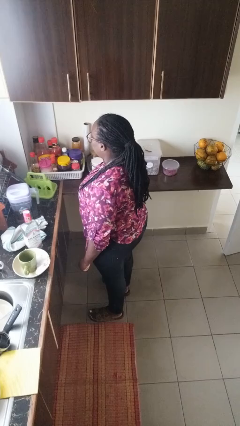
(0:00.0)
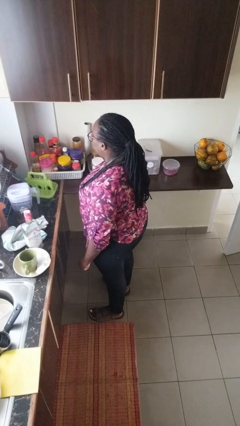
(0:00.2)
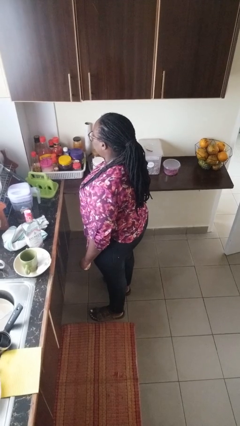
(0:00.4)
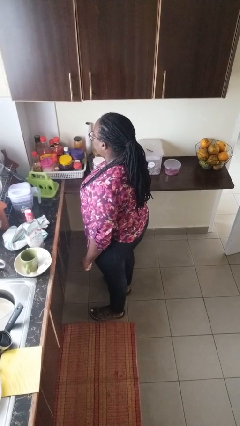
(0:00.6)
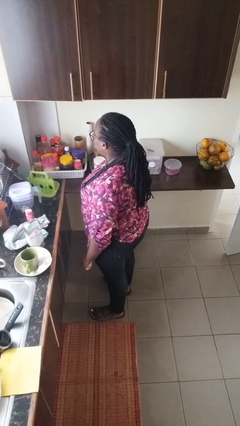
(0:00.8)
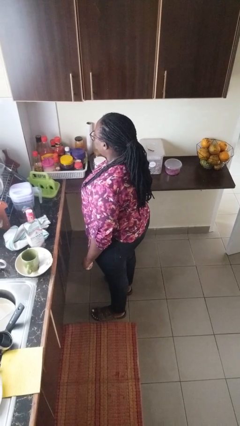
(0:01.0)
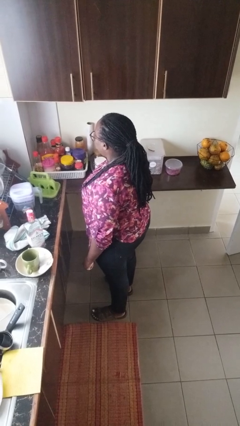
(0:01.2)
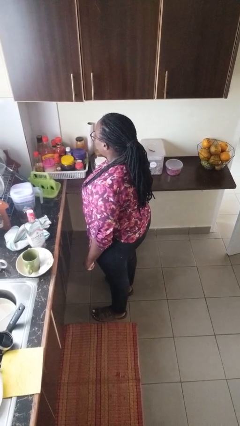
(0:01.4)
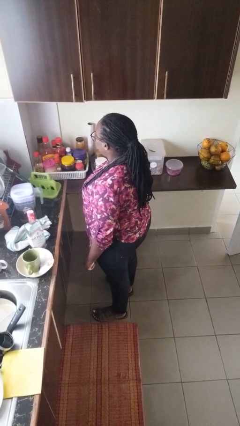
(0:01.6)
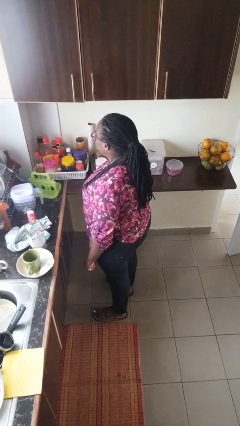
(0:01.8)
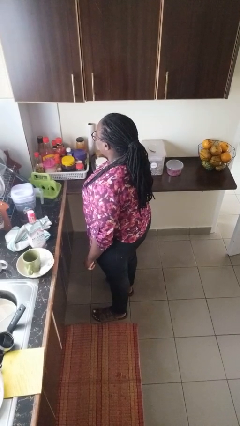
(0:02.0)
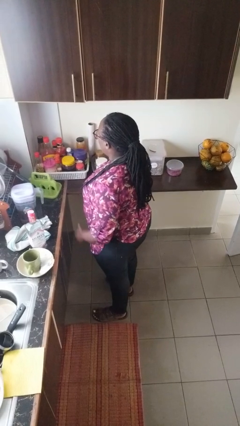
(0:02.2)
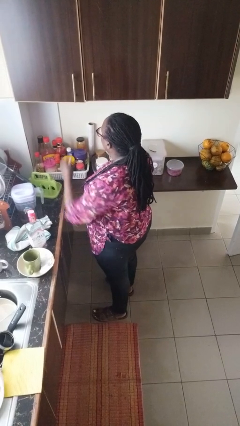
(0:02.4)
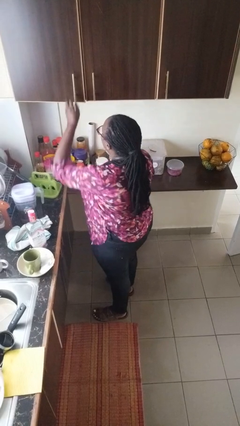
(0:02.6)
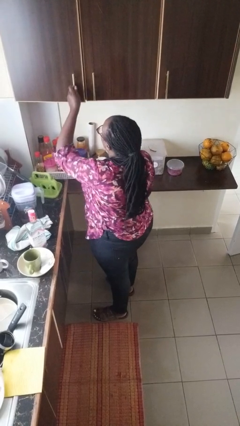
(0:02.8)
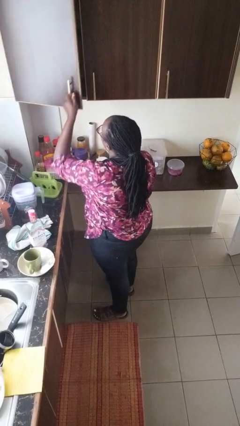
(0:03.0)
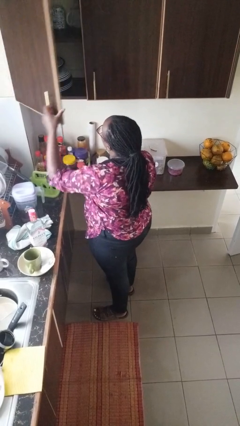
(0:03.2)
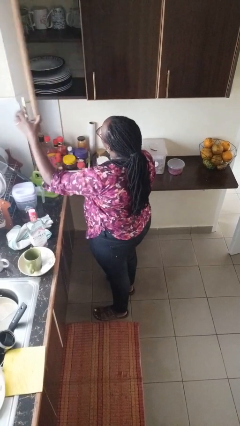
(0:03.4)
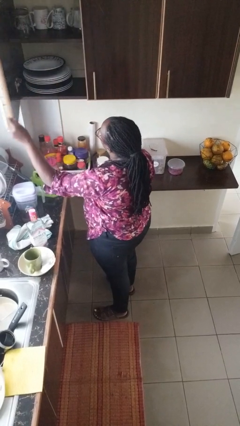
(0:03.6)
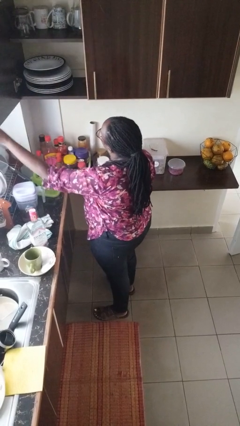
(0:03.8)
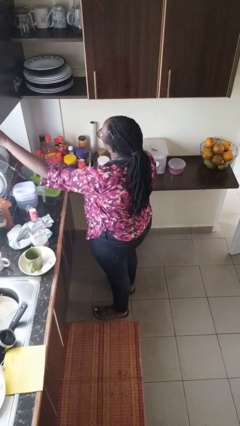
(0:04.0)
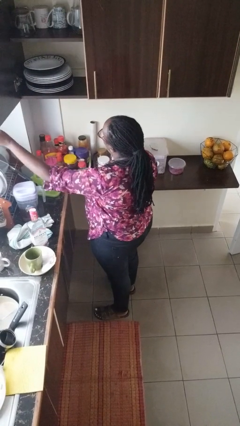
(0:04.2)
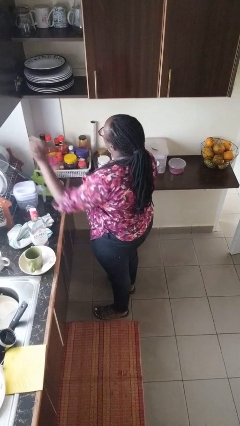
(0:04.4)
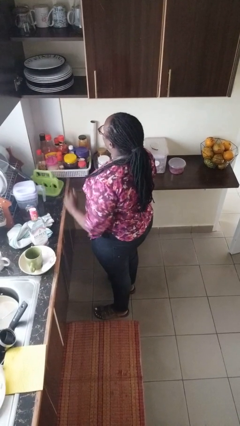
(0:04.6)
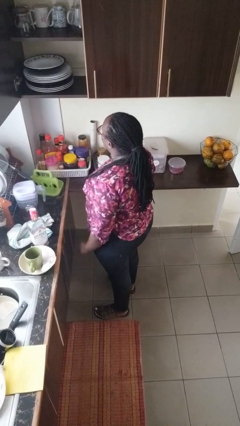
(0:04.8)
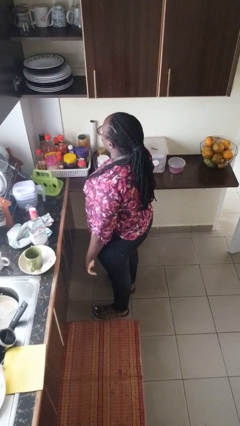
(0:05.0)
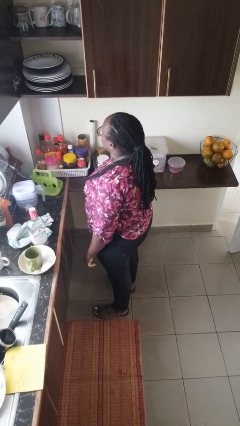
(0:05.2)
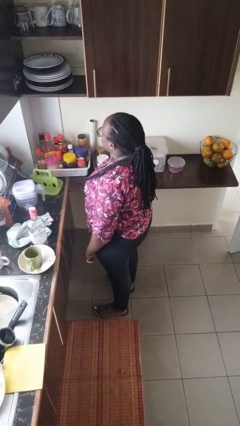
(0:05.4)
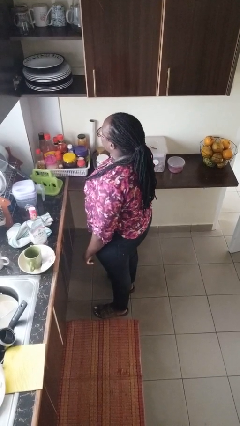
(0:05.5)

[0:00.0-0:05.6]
person opens cabinet

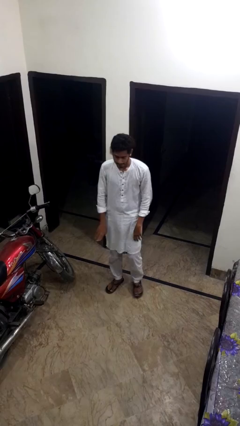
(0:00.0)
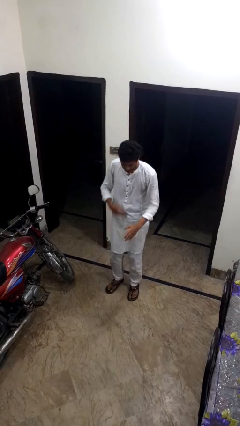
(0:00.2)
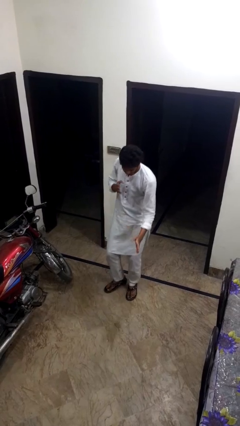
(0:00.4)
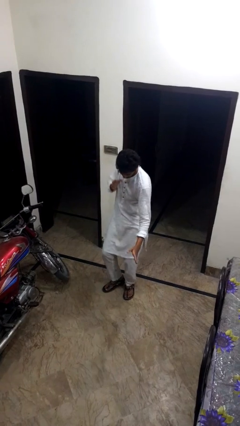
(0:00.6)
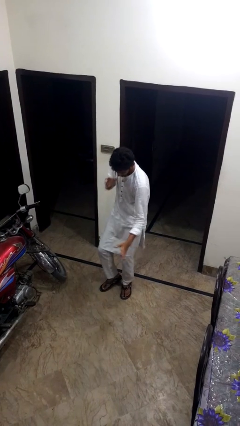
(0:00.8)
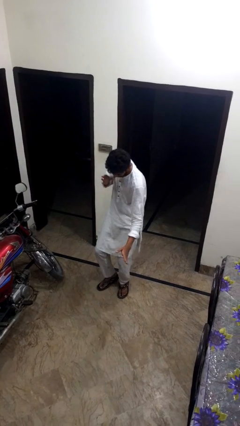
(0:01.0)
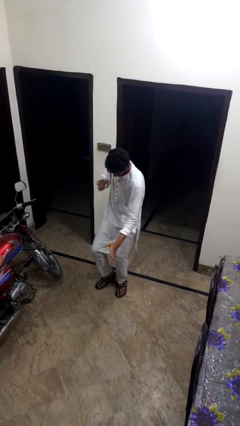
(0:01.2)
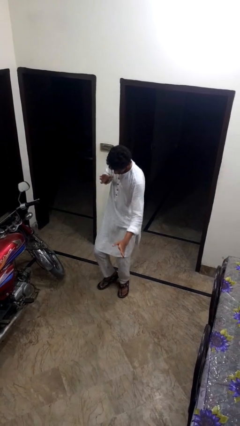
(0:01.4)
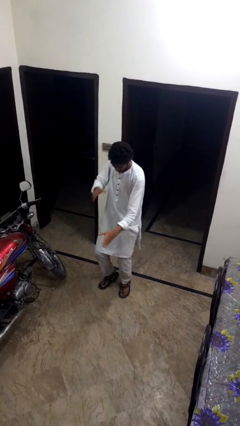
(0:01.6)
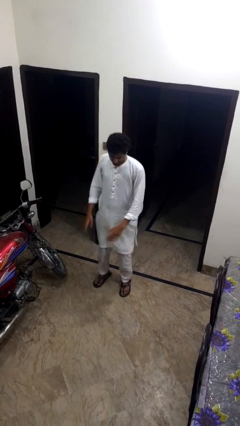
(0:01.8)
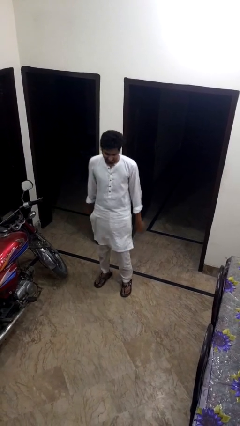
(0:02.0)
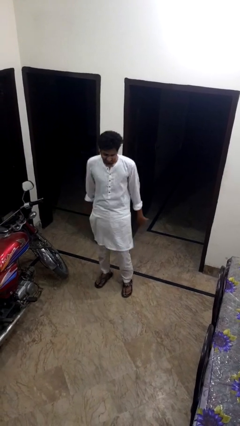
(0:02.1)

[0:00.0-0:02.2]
person dances in place

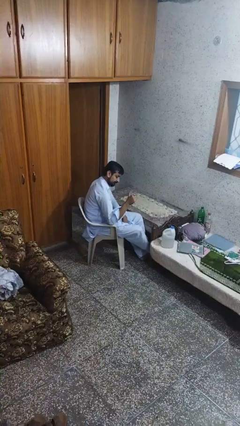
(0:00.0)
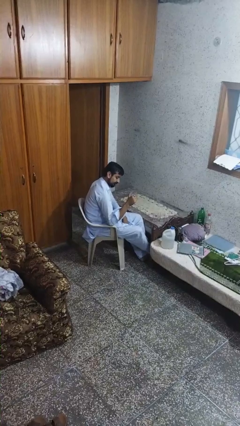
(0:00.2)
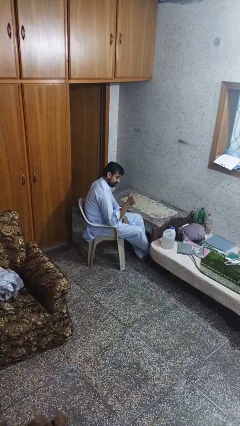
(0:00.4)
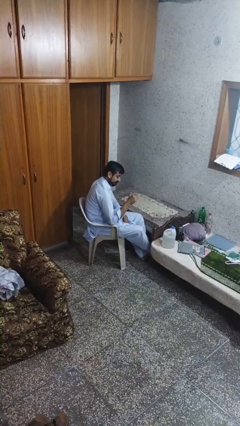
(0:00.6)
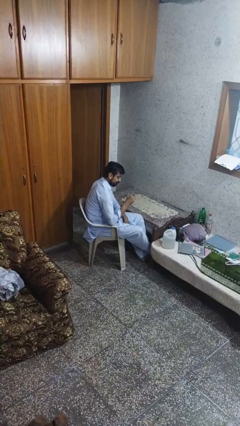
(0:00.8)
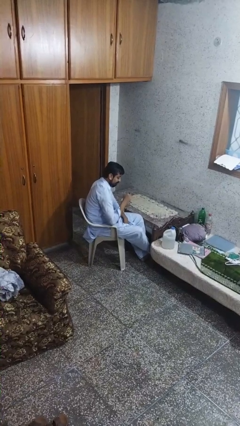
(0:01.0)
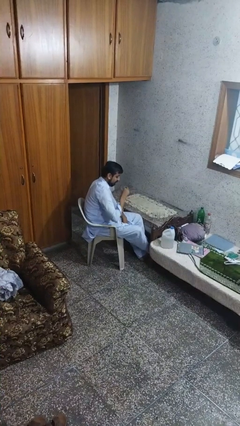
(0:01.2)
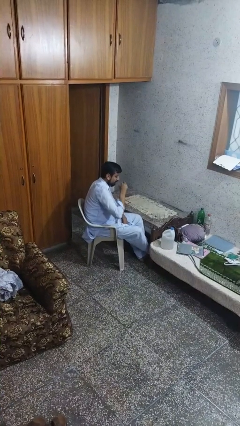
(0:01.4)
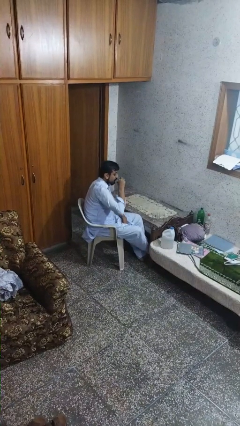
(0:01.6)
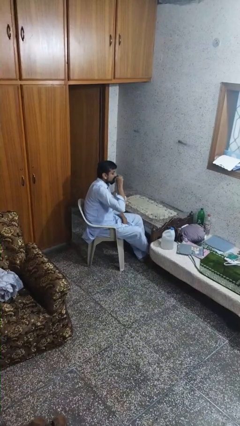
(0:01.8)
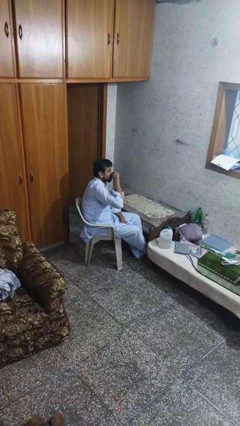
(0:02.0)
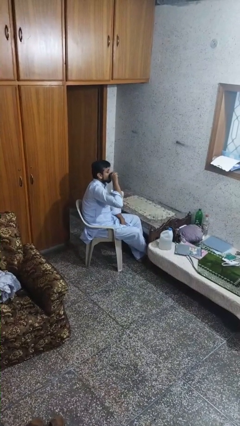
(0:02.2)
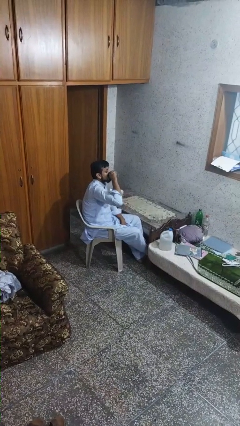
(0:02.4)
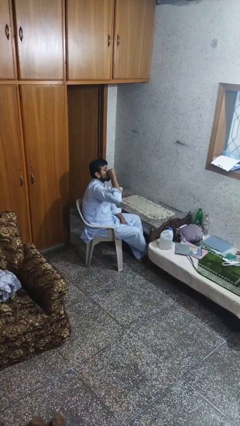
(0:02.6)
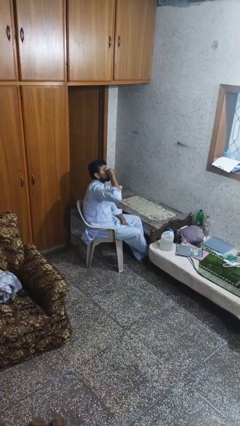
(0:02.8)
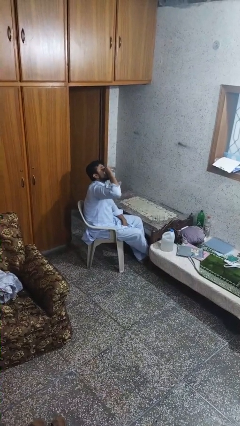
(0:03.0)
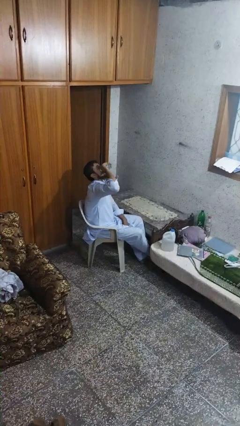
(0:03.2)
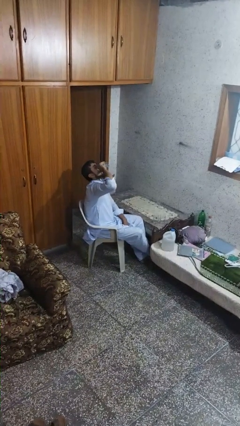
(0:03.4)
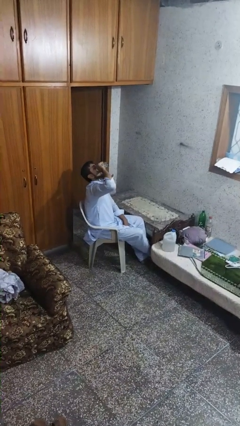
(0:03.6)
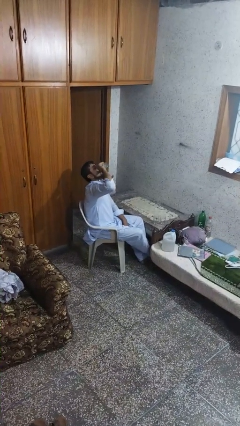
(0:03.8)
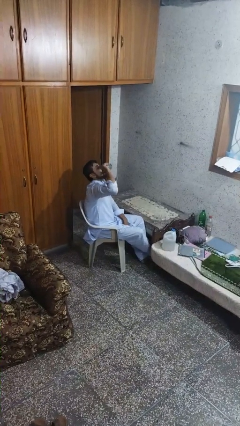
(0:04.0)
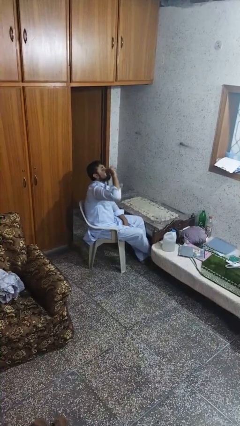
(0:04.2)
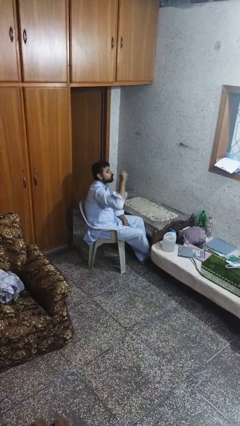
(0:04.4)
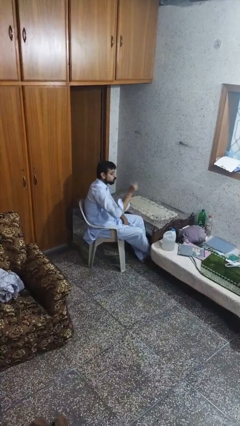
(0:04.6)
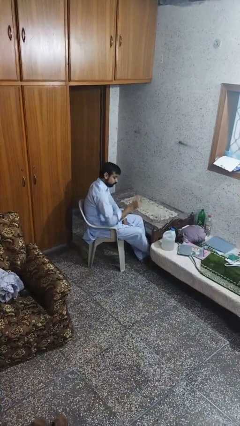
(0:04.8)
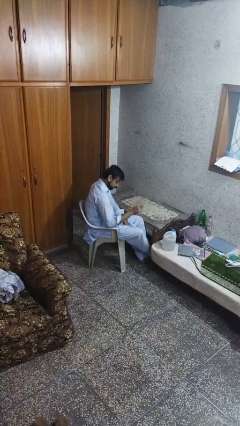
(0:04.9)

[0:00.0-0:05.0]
person drinks from shotglass

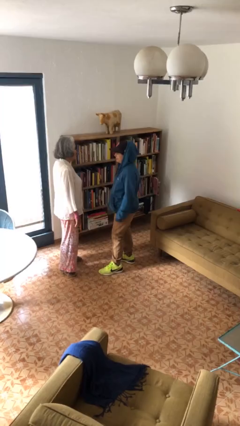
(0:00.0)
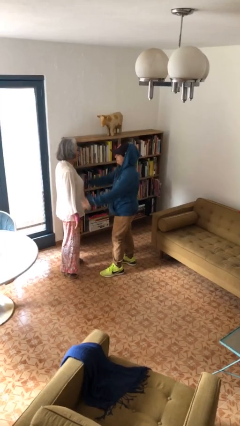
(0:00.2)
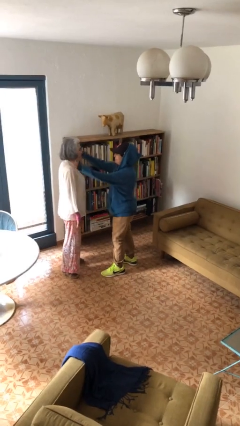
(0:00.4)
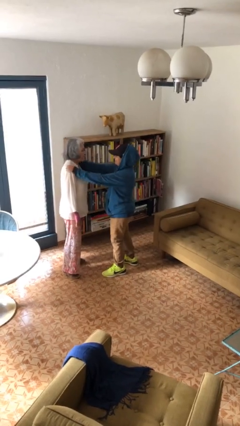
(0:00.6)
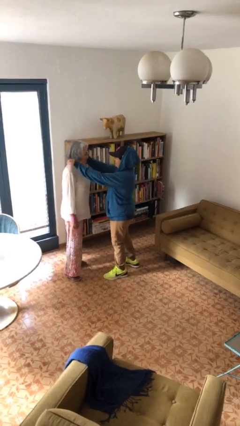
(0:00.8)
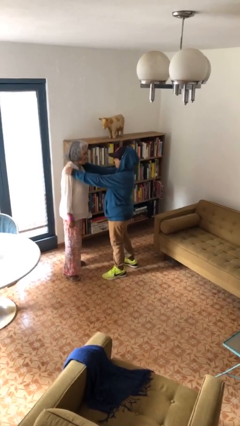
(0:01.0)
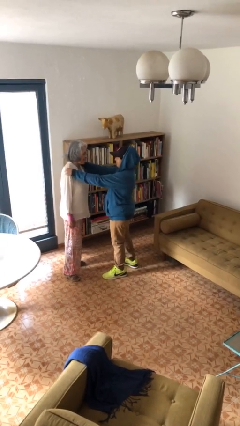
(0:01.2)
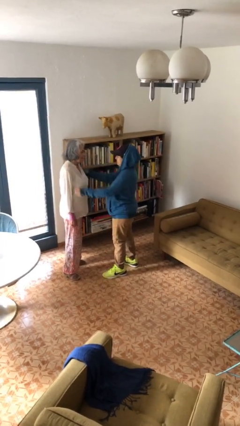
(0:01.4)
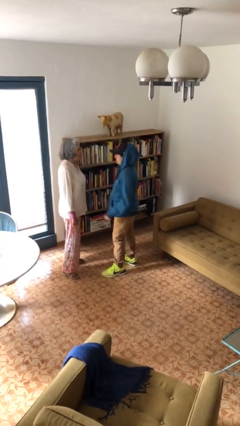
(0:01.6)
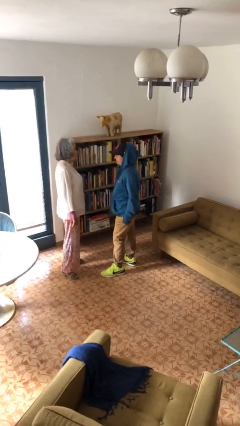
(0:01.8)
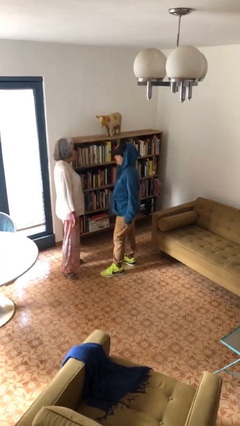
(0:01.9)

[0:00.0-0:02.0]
person pounds shoulders of person

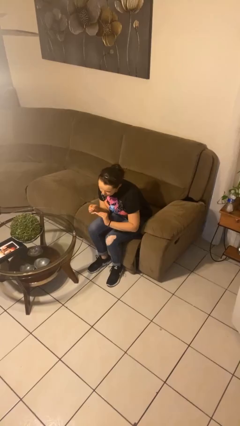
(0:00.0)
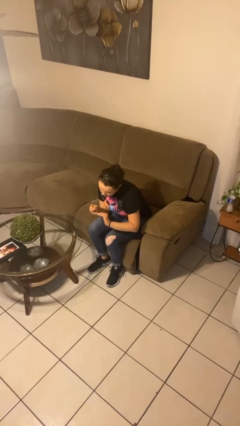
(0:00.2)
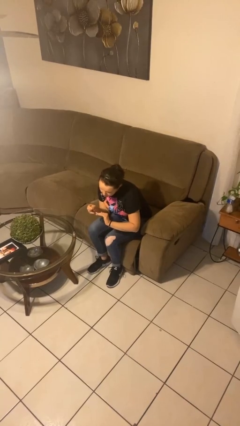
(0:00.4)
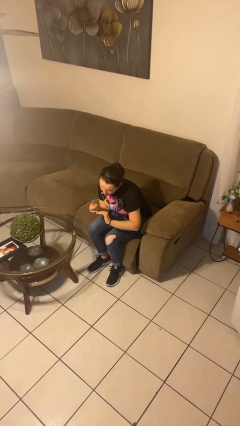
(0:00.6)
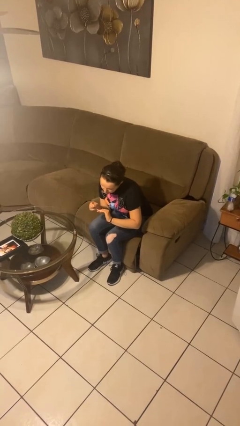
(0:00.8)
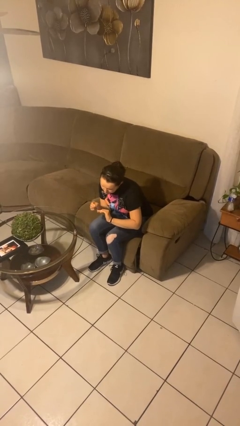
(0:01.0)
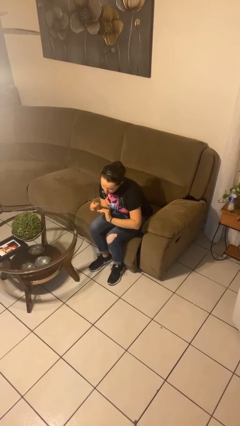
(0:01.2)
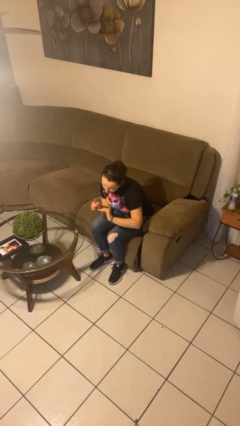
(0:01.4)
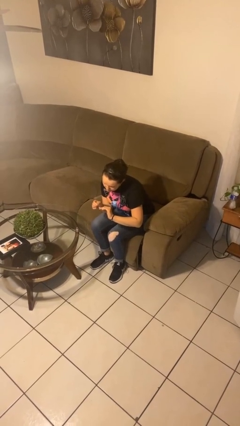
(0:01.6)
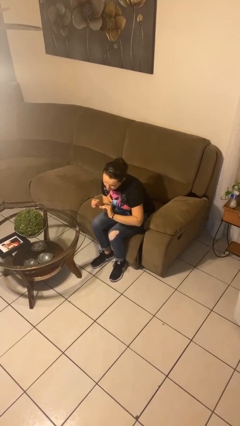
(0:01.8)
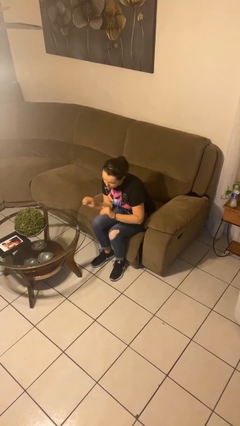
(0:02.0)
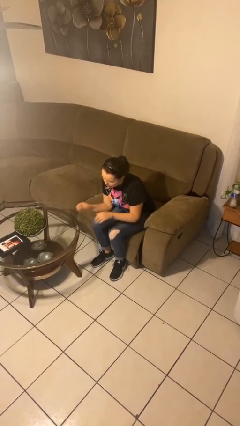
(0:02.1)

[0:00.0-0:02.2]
person paints fingernails

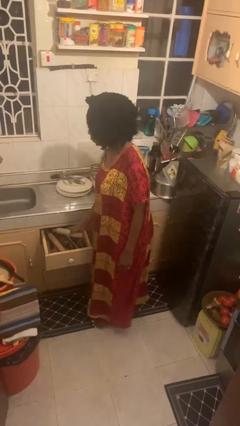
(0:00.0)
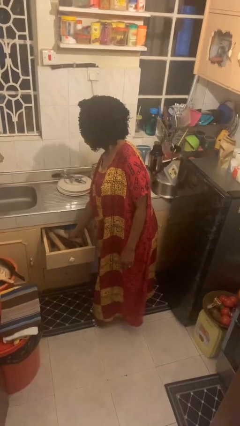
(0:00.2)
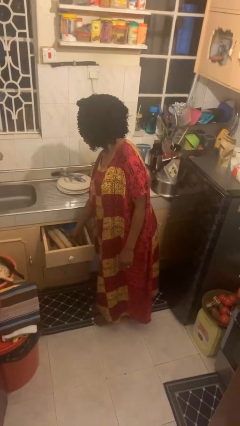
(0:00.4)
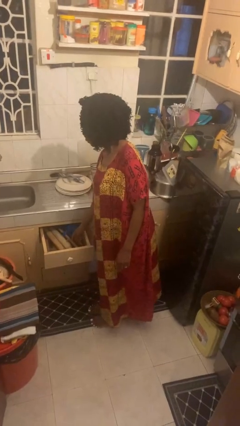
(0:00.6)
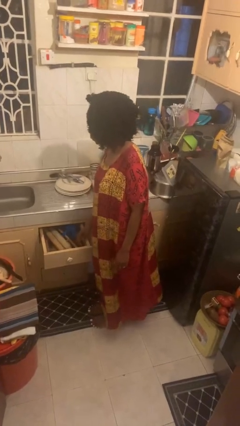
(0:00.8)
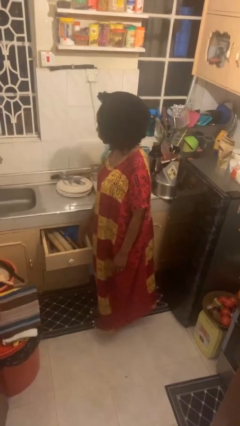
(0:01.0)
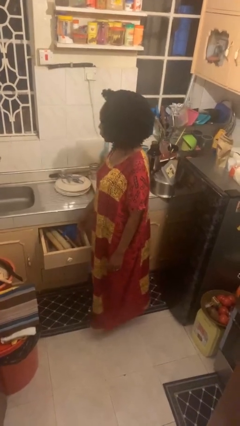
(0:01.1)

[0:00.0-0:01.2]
person puts object into kitchen drawer
